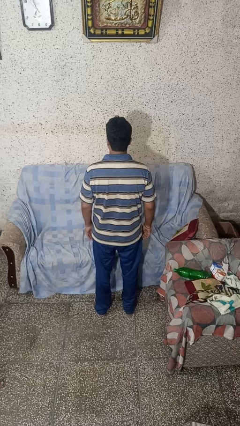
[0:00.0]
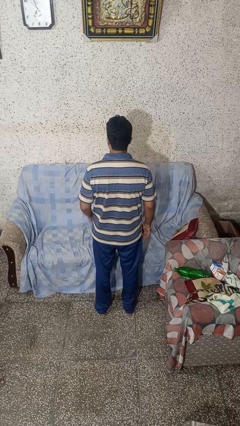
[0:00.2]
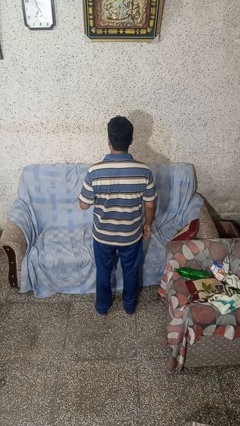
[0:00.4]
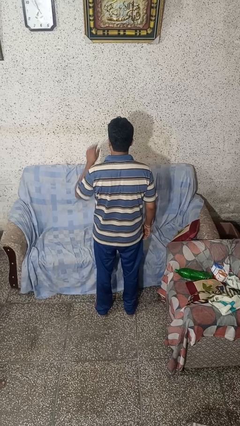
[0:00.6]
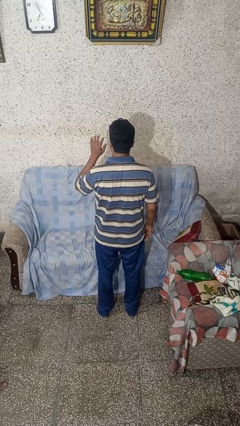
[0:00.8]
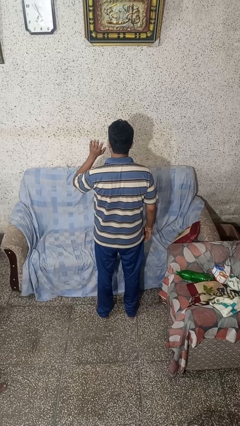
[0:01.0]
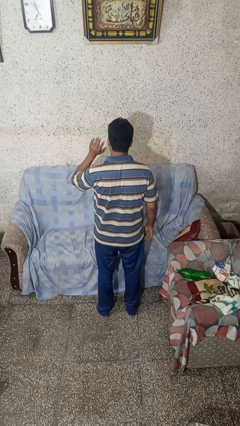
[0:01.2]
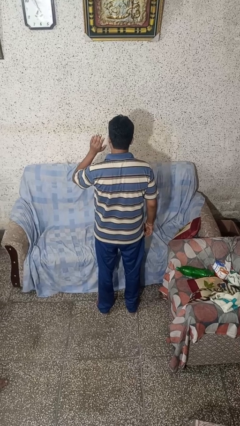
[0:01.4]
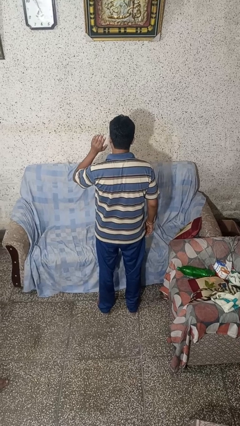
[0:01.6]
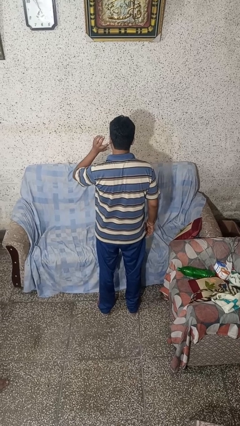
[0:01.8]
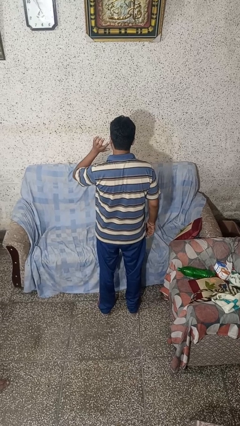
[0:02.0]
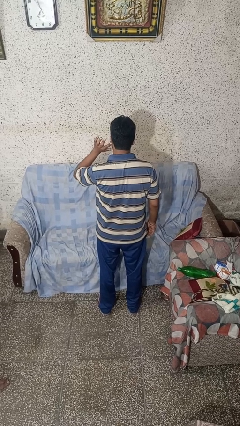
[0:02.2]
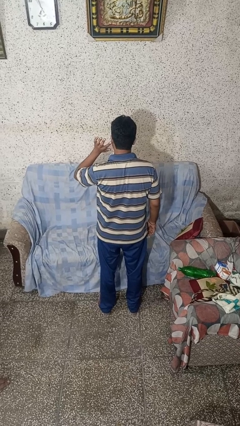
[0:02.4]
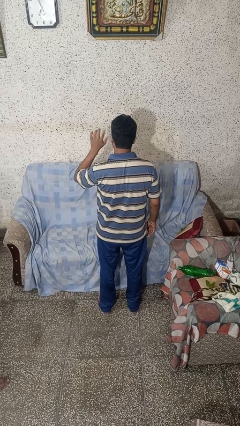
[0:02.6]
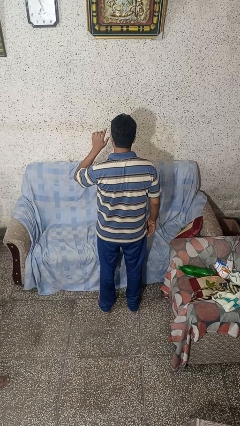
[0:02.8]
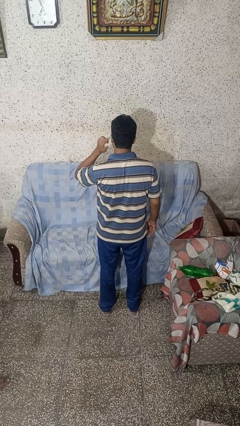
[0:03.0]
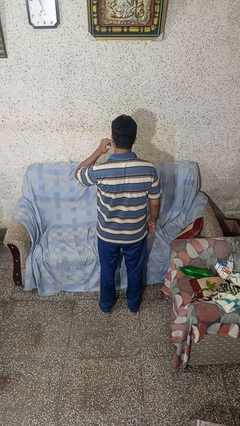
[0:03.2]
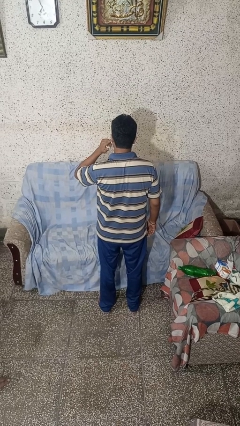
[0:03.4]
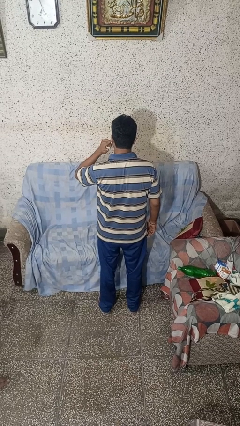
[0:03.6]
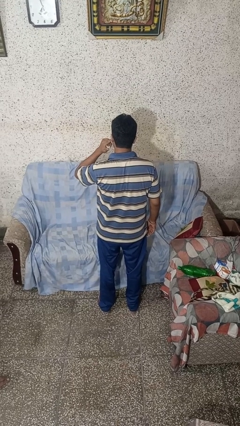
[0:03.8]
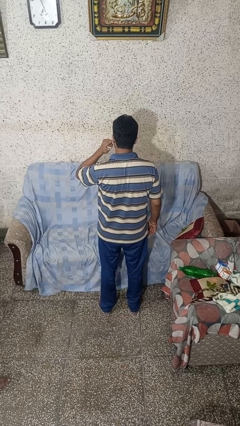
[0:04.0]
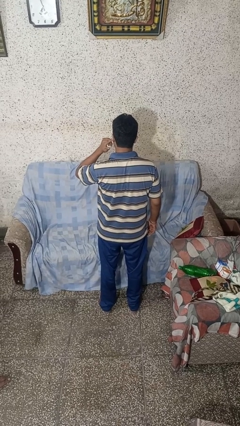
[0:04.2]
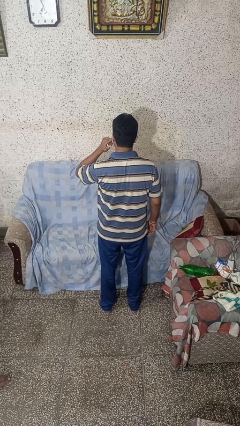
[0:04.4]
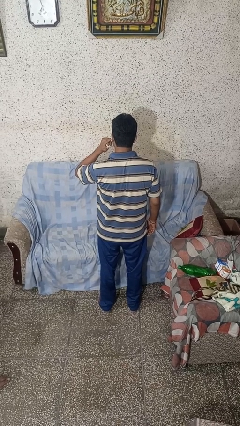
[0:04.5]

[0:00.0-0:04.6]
person gestures listen closely

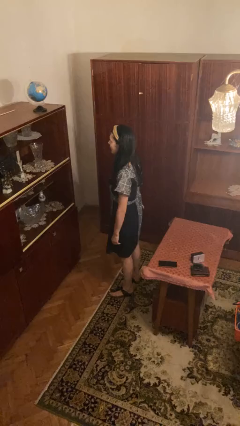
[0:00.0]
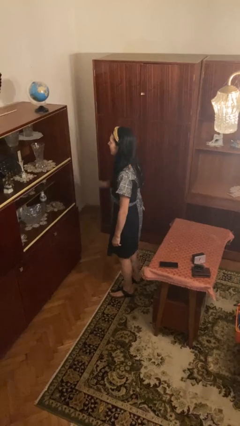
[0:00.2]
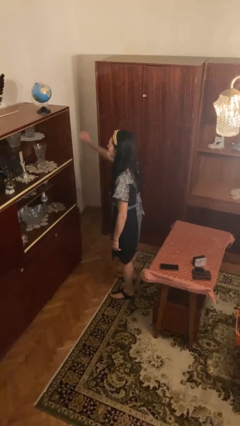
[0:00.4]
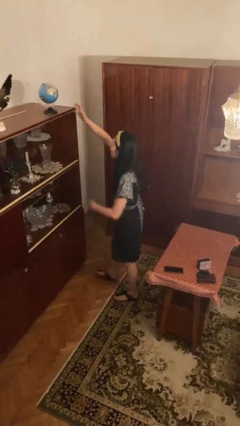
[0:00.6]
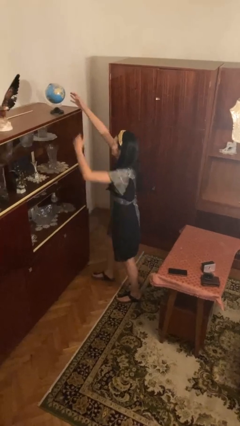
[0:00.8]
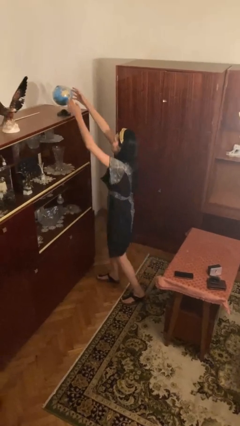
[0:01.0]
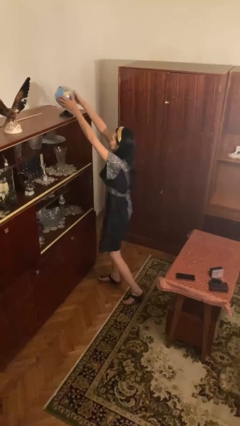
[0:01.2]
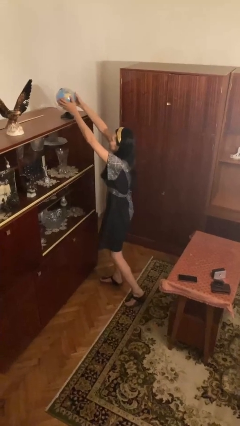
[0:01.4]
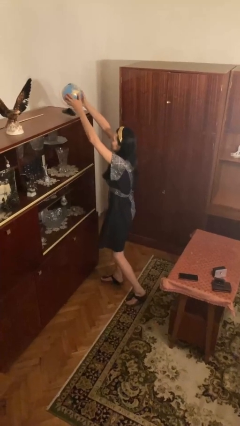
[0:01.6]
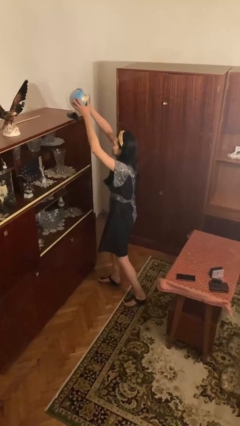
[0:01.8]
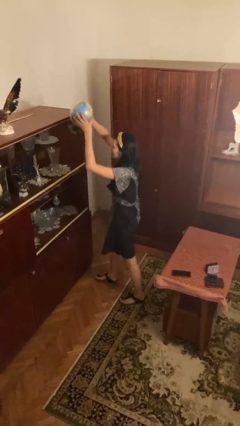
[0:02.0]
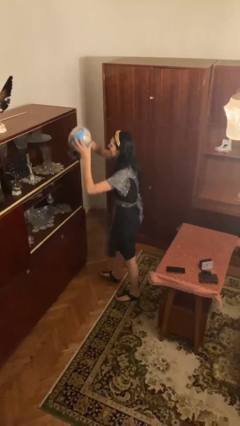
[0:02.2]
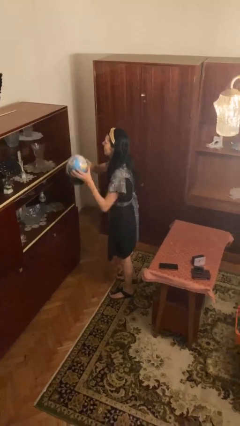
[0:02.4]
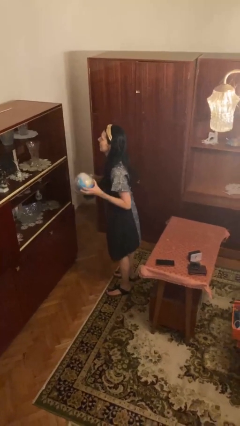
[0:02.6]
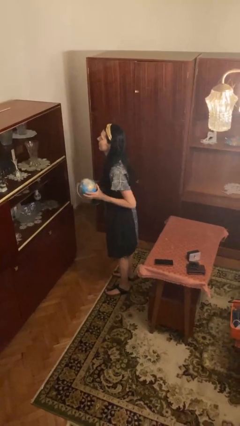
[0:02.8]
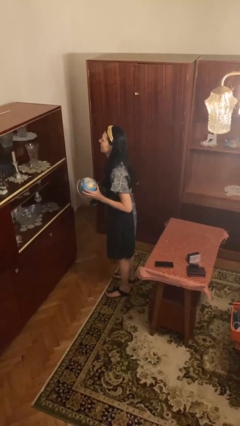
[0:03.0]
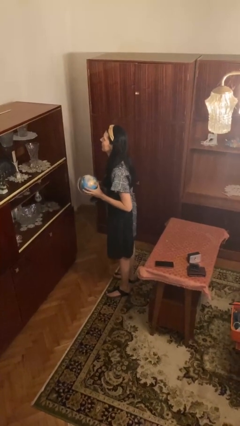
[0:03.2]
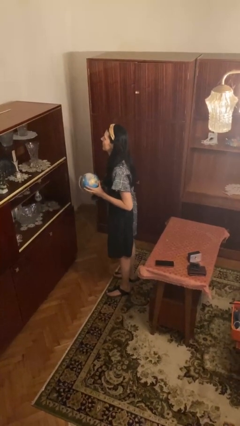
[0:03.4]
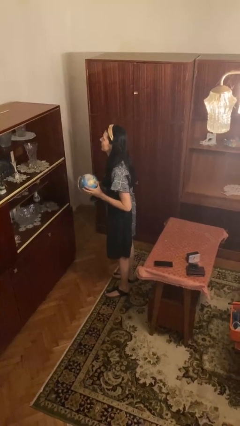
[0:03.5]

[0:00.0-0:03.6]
person picks up object from countertop

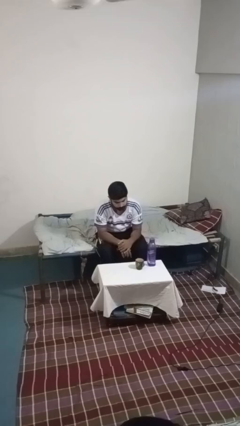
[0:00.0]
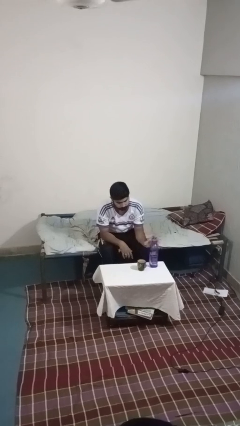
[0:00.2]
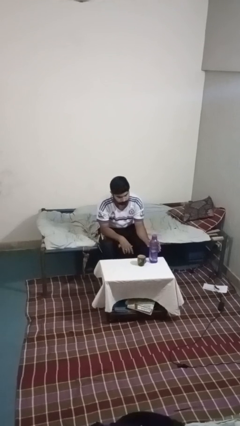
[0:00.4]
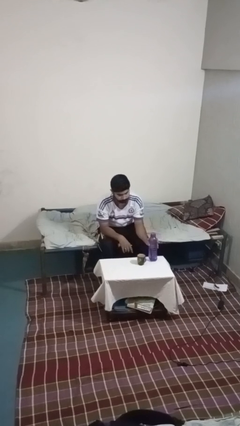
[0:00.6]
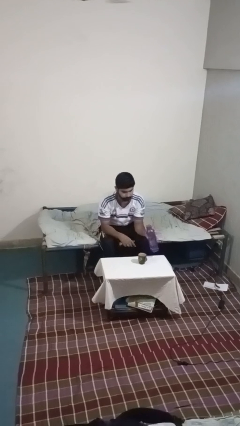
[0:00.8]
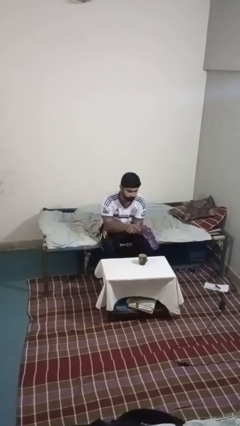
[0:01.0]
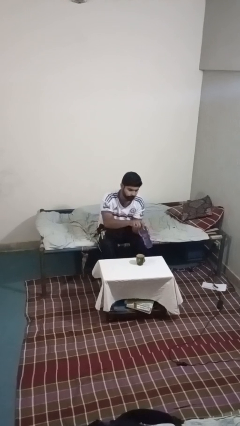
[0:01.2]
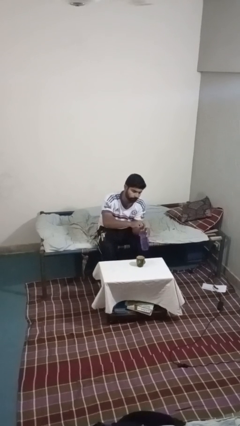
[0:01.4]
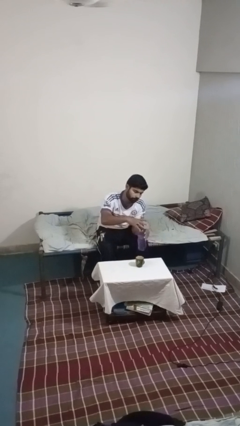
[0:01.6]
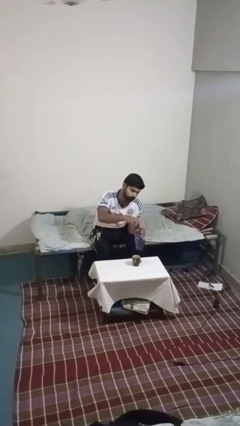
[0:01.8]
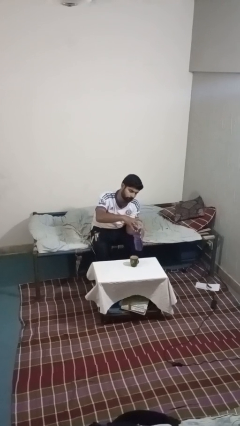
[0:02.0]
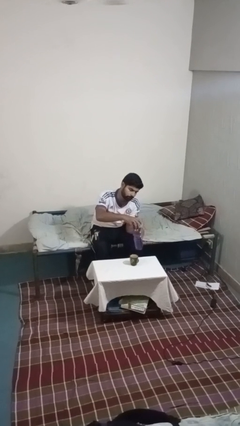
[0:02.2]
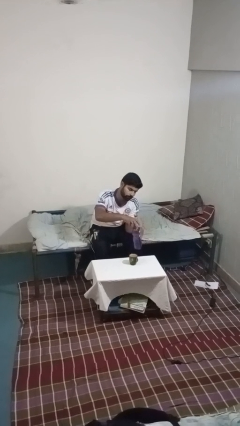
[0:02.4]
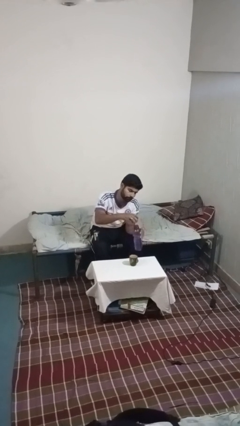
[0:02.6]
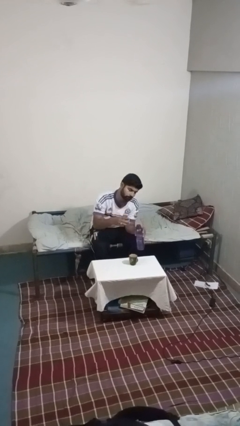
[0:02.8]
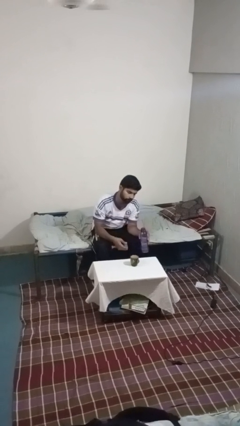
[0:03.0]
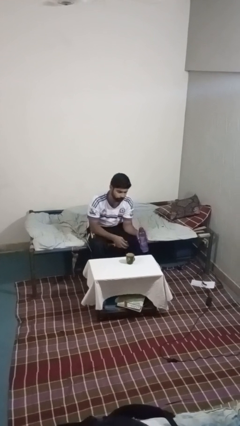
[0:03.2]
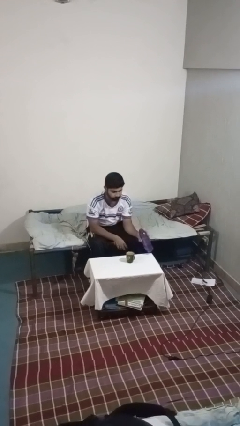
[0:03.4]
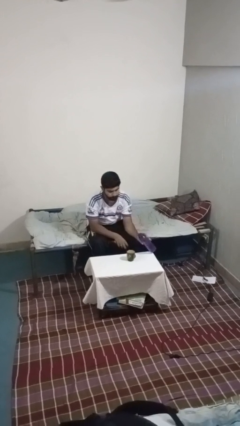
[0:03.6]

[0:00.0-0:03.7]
person unscrews lid from bottle

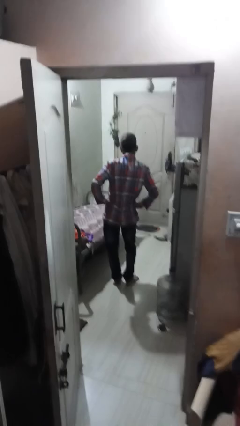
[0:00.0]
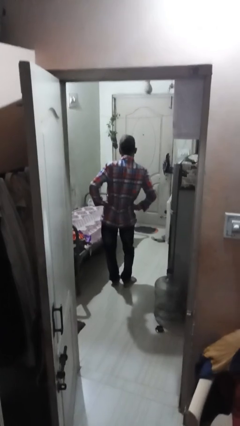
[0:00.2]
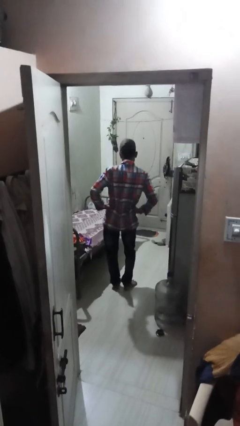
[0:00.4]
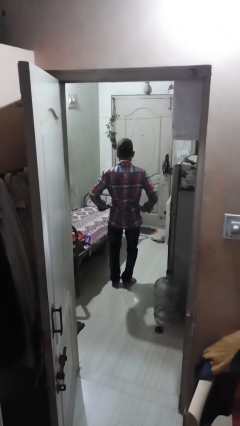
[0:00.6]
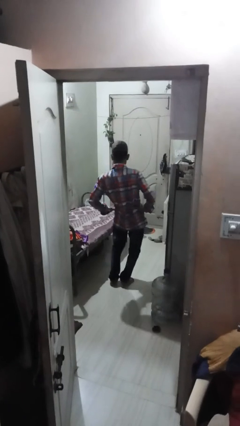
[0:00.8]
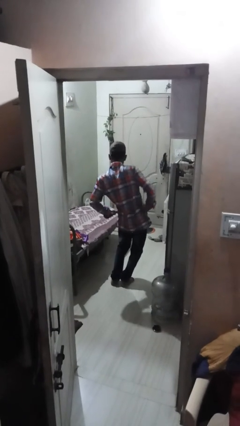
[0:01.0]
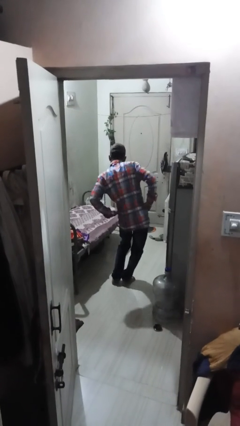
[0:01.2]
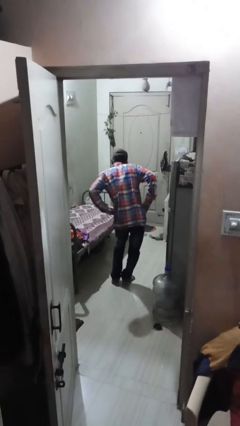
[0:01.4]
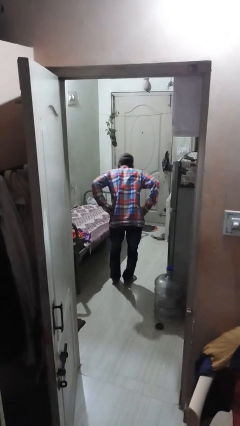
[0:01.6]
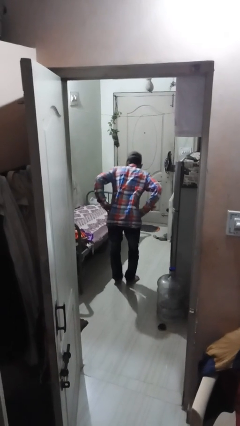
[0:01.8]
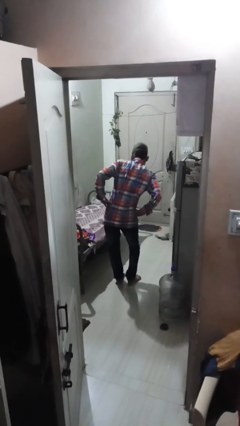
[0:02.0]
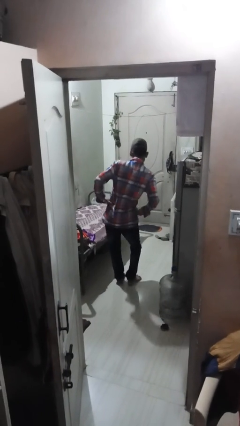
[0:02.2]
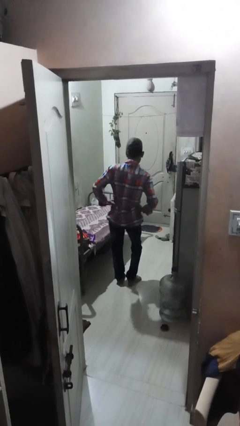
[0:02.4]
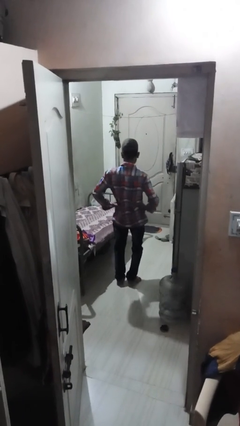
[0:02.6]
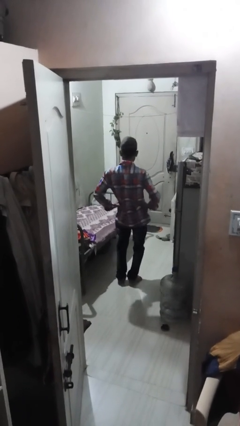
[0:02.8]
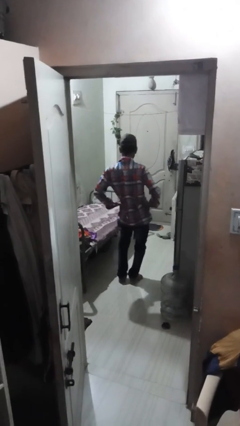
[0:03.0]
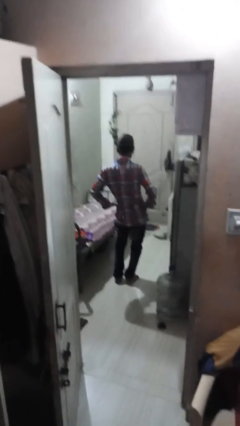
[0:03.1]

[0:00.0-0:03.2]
person wiggles hips

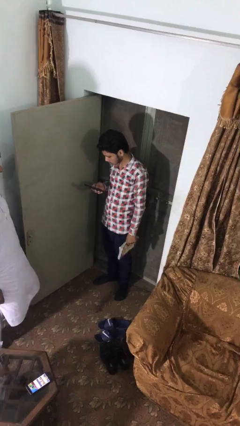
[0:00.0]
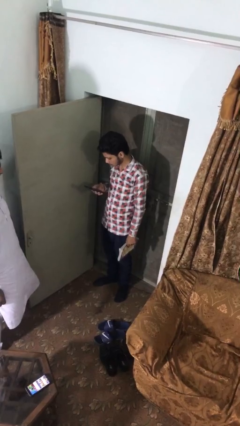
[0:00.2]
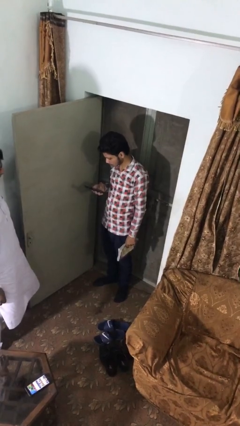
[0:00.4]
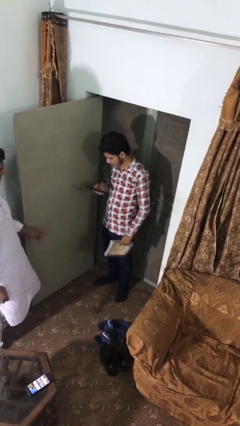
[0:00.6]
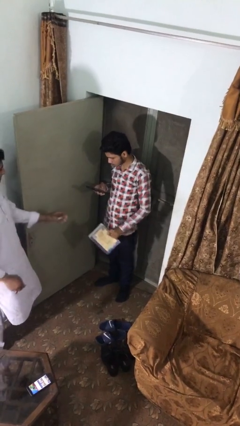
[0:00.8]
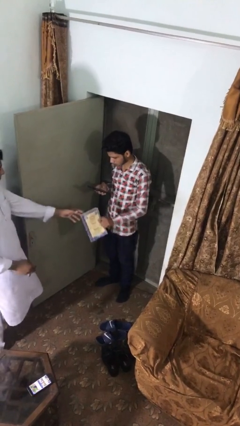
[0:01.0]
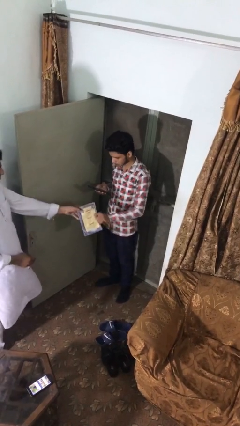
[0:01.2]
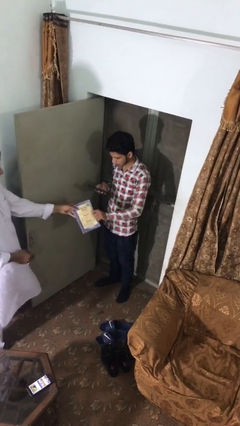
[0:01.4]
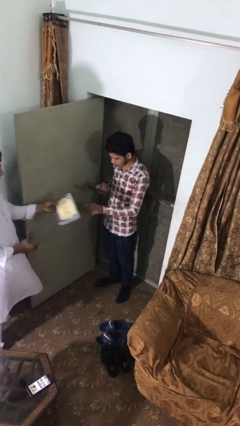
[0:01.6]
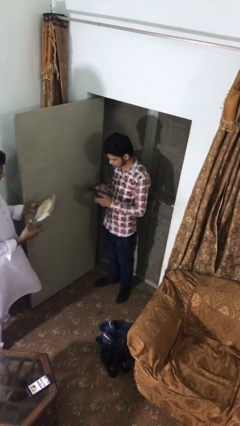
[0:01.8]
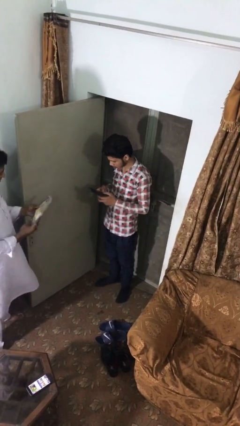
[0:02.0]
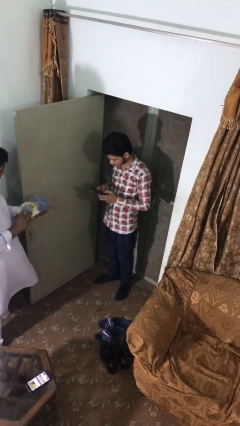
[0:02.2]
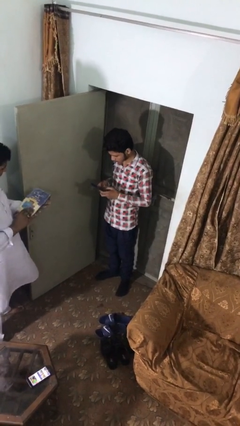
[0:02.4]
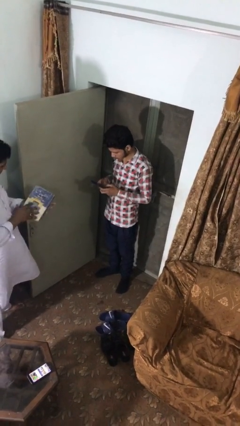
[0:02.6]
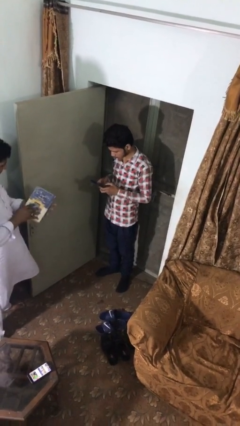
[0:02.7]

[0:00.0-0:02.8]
person transfers object to person
